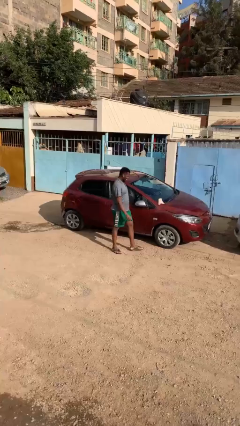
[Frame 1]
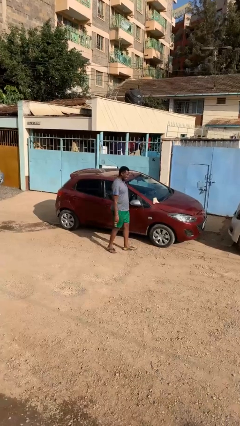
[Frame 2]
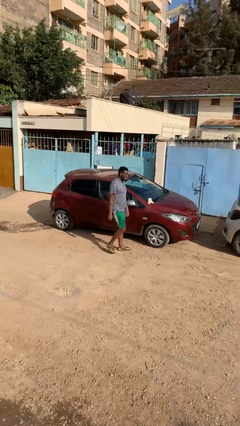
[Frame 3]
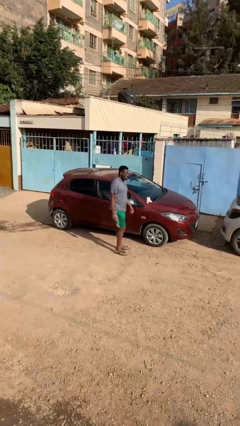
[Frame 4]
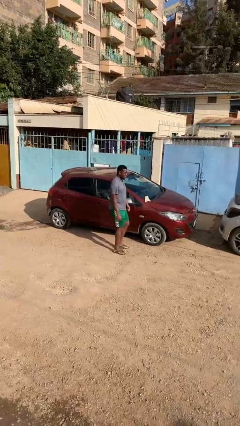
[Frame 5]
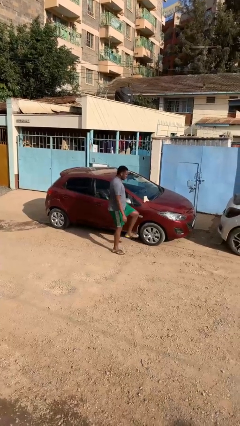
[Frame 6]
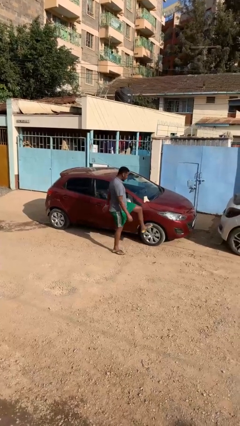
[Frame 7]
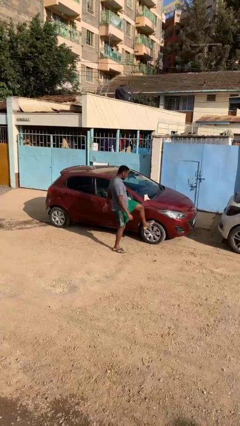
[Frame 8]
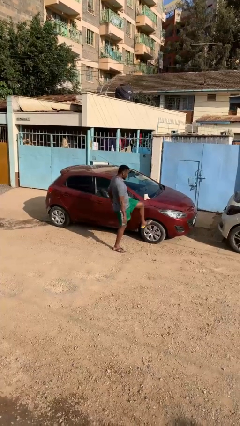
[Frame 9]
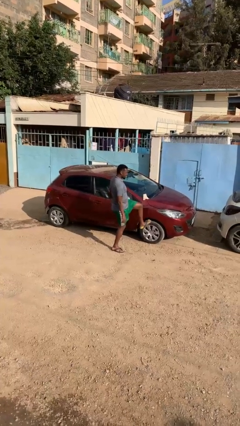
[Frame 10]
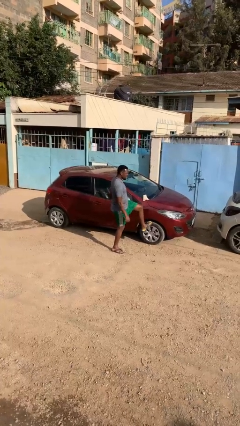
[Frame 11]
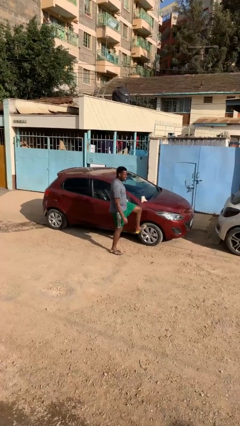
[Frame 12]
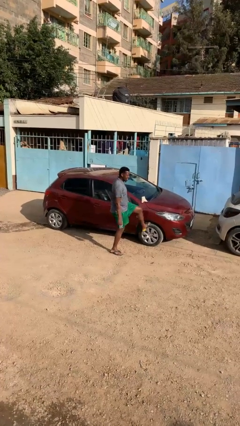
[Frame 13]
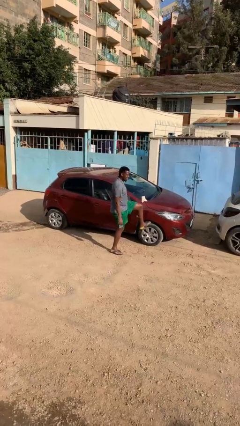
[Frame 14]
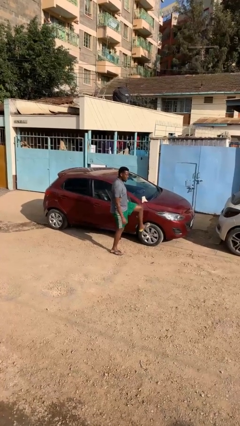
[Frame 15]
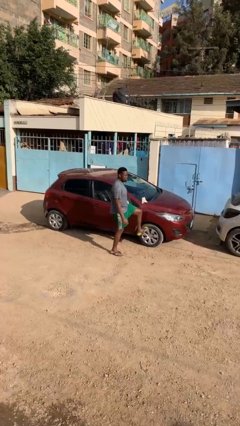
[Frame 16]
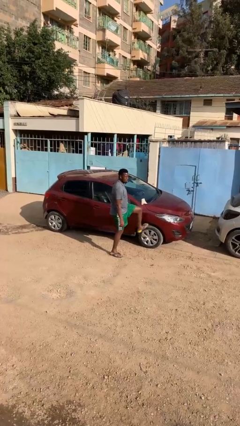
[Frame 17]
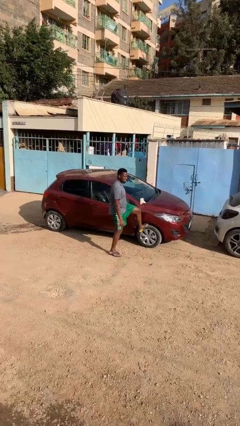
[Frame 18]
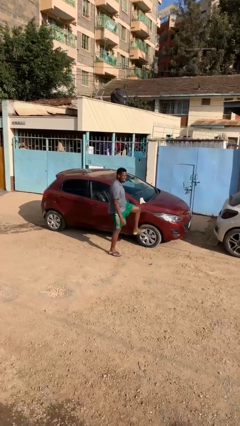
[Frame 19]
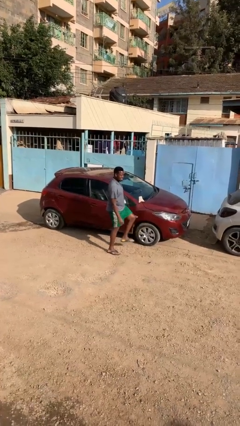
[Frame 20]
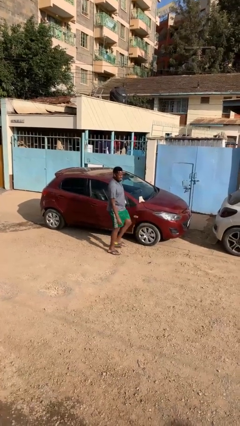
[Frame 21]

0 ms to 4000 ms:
person kicks car tires

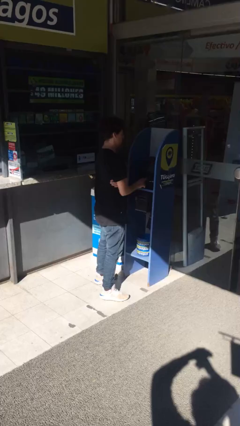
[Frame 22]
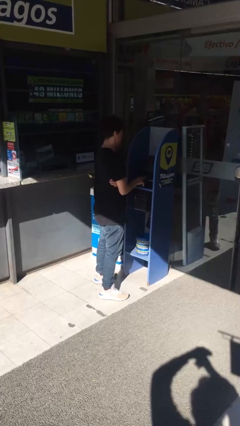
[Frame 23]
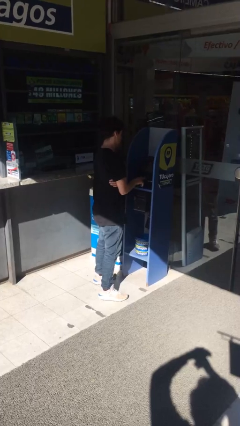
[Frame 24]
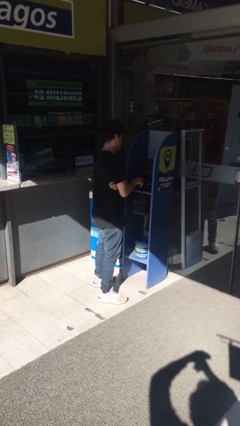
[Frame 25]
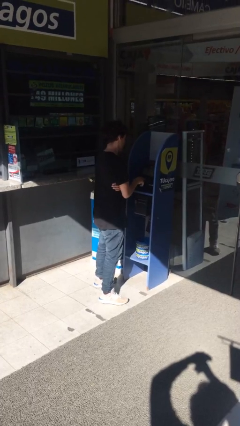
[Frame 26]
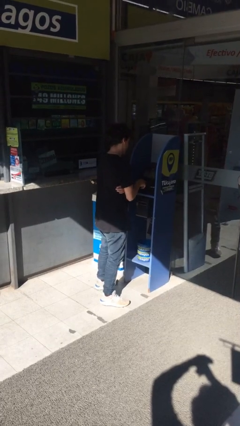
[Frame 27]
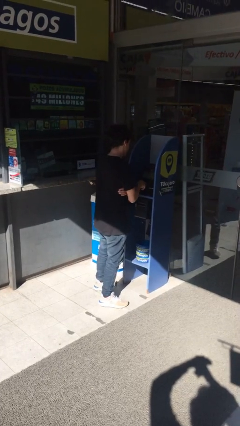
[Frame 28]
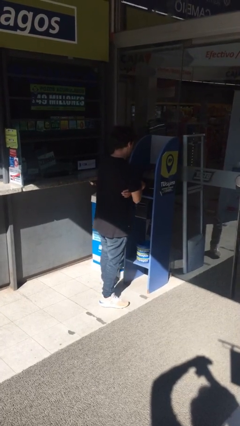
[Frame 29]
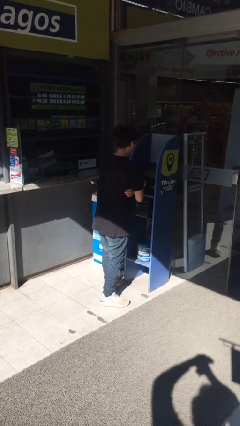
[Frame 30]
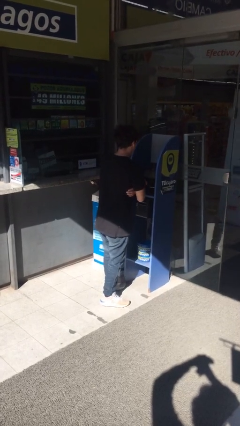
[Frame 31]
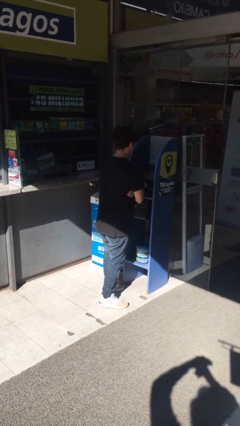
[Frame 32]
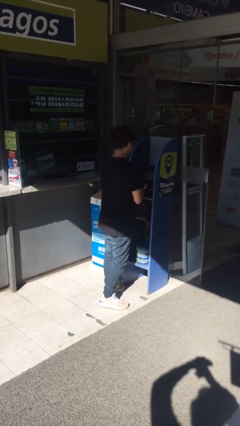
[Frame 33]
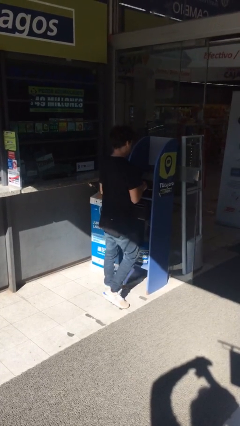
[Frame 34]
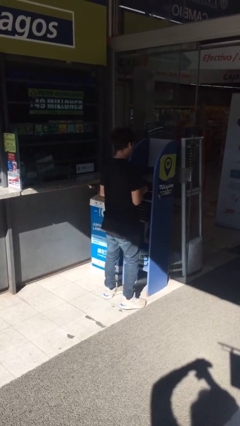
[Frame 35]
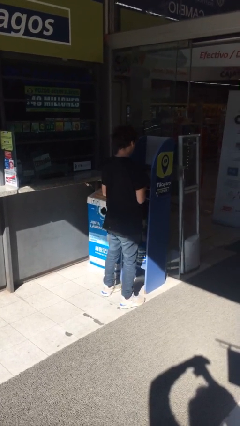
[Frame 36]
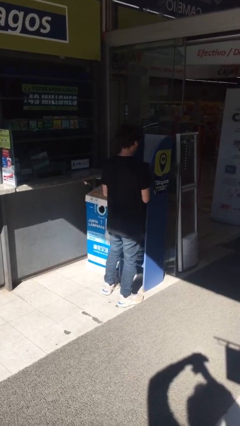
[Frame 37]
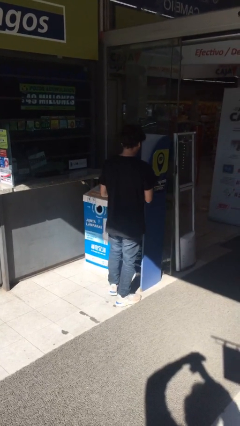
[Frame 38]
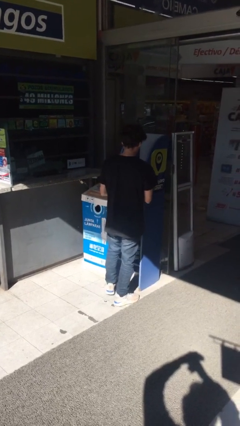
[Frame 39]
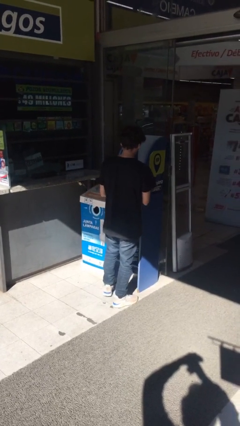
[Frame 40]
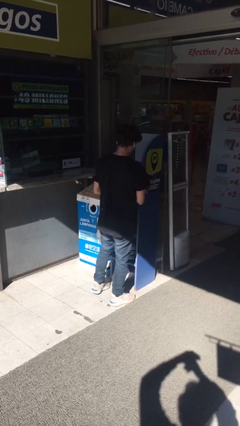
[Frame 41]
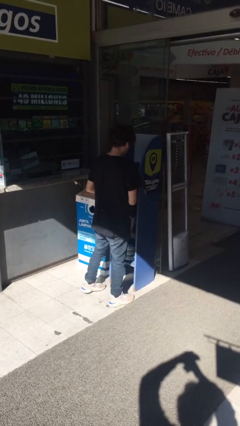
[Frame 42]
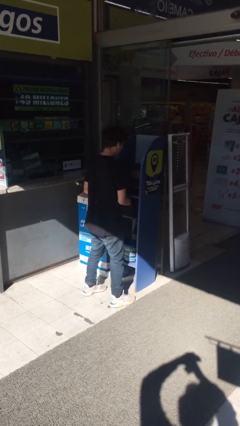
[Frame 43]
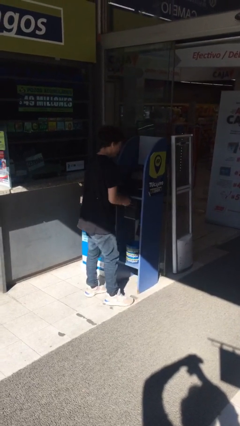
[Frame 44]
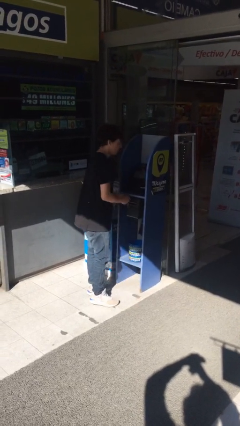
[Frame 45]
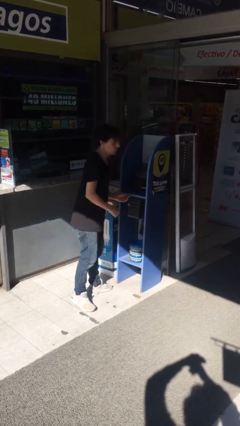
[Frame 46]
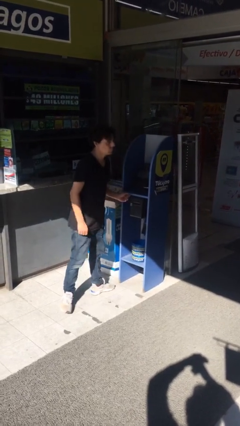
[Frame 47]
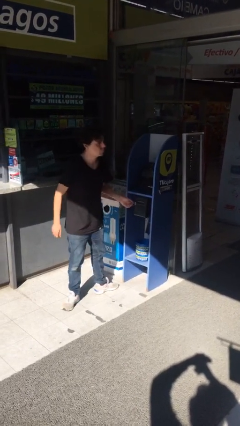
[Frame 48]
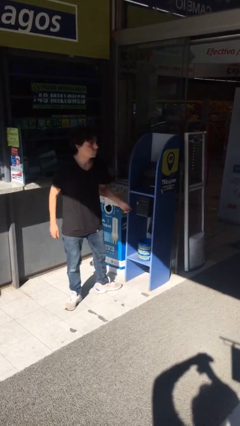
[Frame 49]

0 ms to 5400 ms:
person purchases from machine

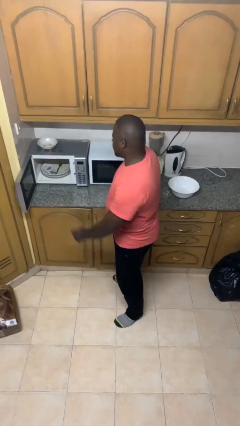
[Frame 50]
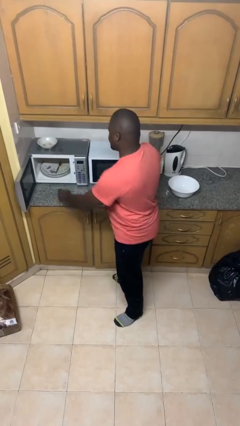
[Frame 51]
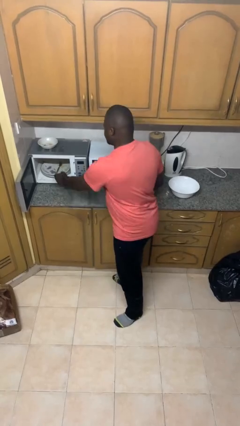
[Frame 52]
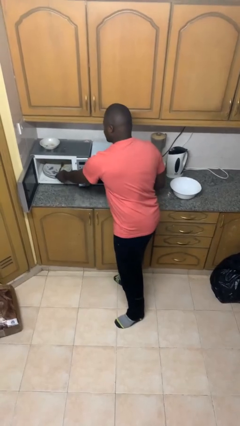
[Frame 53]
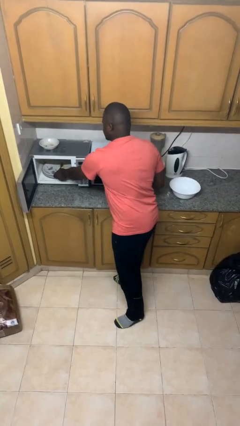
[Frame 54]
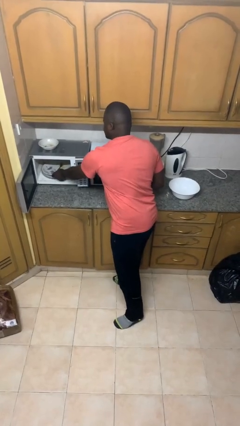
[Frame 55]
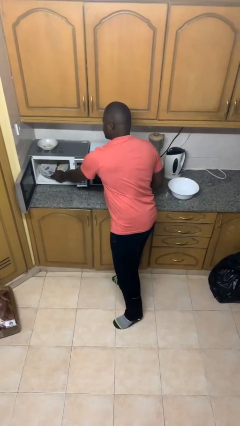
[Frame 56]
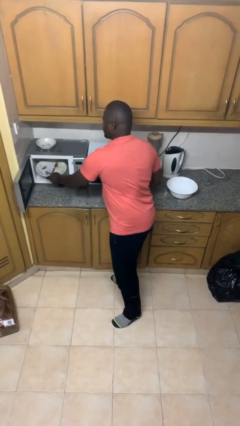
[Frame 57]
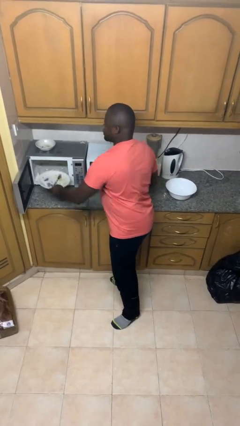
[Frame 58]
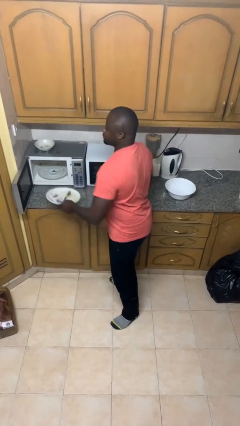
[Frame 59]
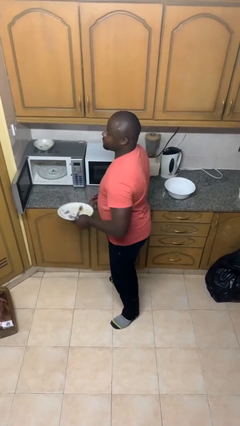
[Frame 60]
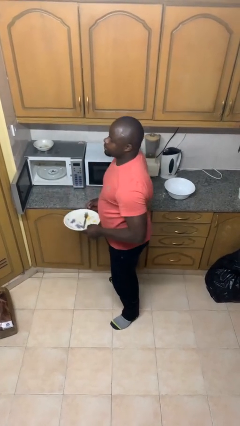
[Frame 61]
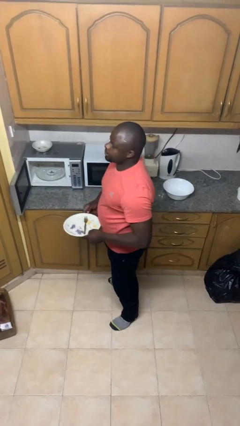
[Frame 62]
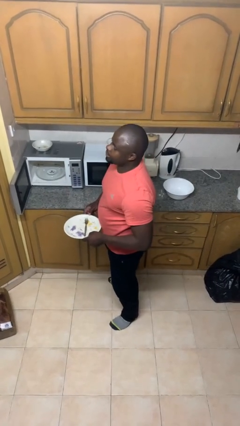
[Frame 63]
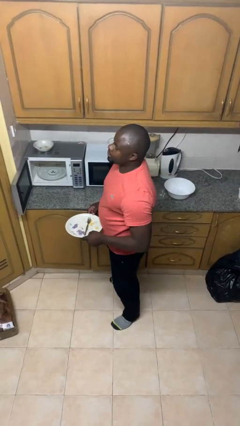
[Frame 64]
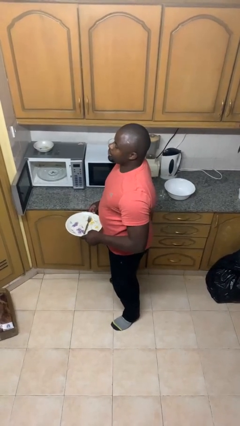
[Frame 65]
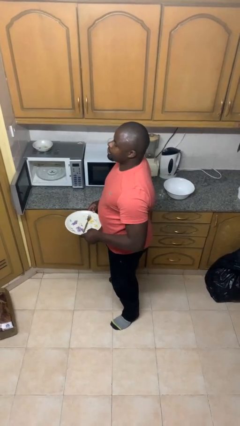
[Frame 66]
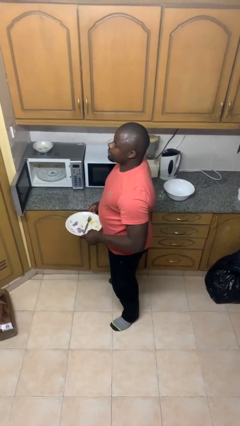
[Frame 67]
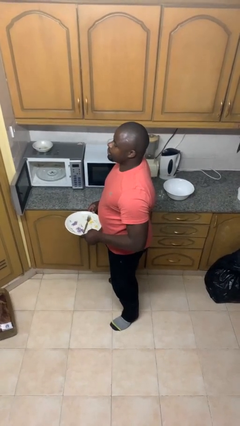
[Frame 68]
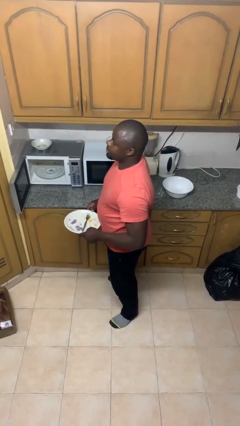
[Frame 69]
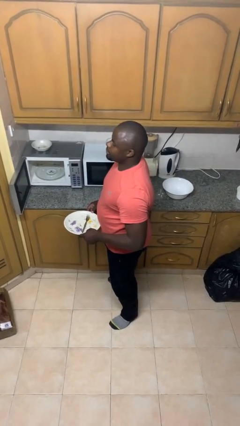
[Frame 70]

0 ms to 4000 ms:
person takes object from microwave

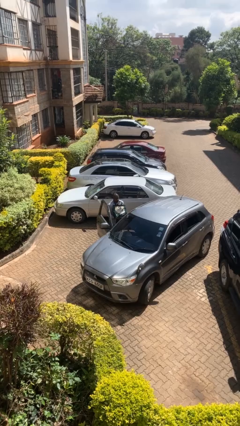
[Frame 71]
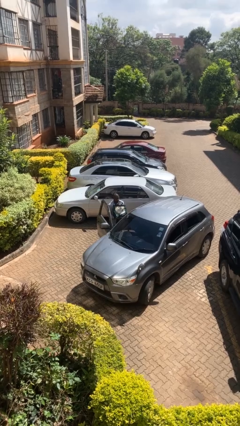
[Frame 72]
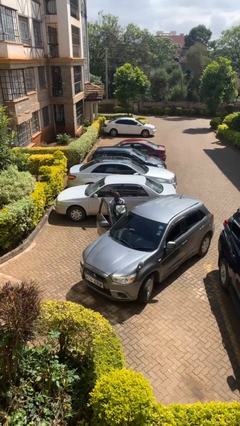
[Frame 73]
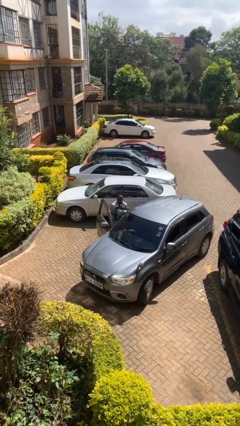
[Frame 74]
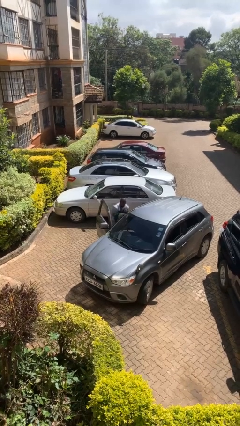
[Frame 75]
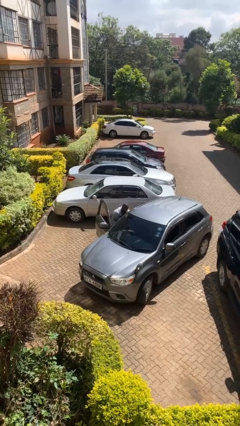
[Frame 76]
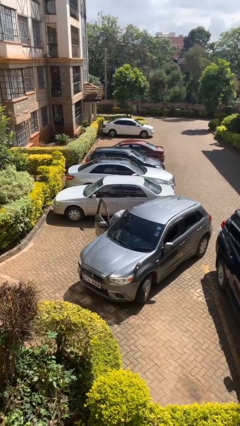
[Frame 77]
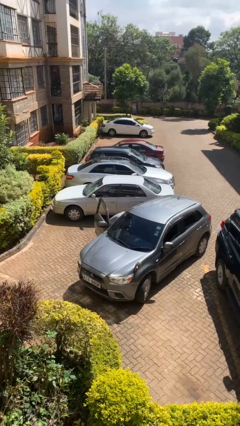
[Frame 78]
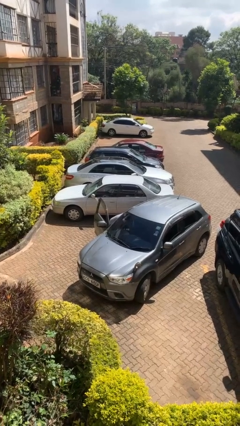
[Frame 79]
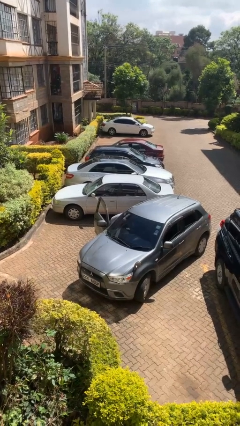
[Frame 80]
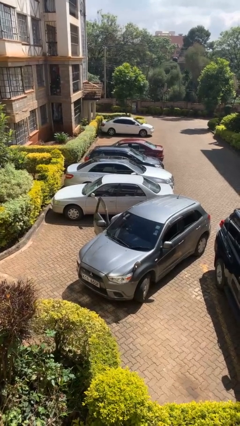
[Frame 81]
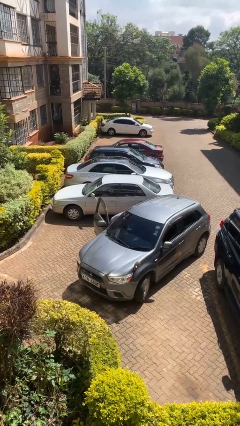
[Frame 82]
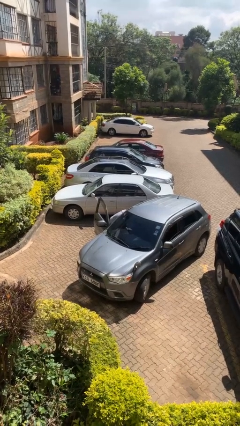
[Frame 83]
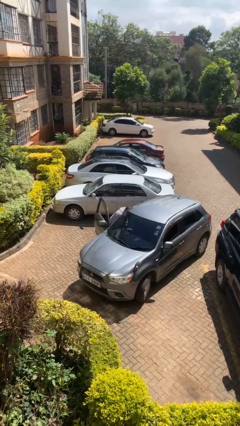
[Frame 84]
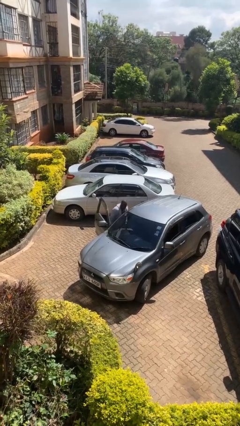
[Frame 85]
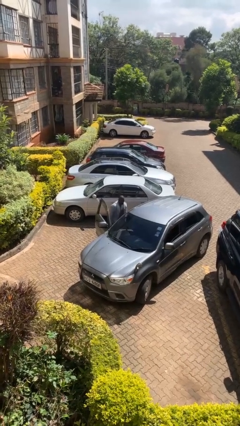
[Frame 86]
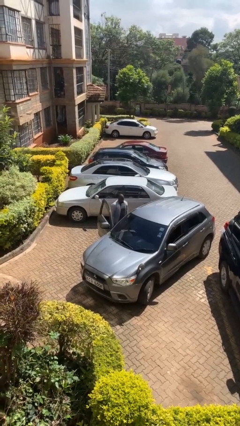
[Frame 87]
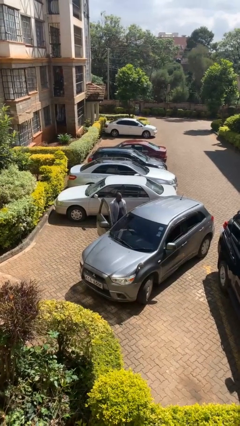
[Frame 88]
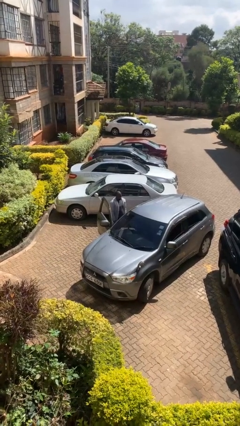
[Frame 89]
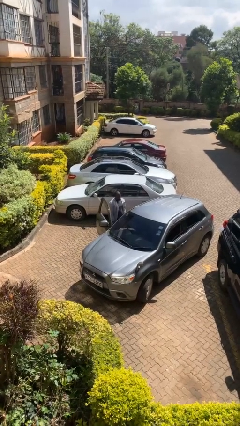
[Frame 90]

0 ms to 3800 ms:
person loads car

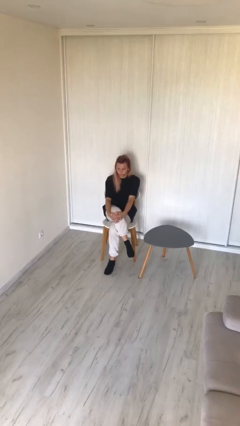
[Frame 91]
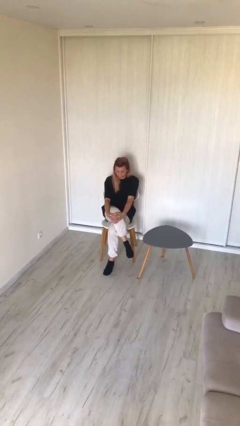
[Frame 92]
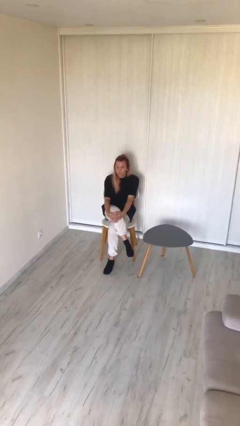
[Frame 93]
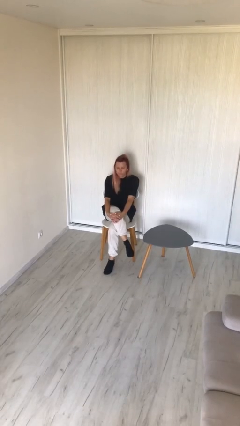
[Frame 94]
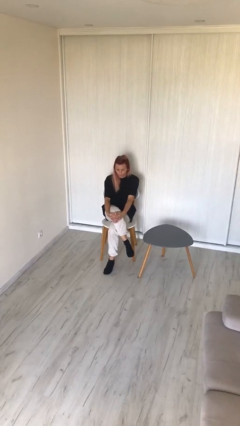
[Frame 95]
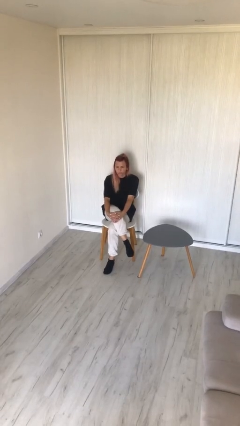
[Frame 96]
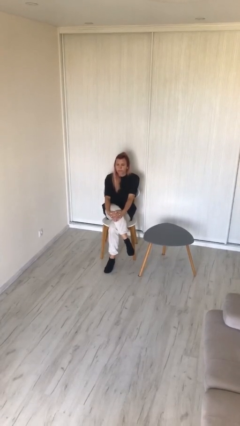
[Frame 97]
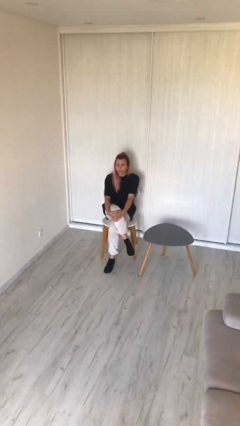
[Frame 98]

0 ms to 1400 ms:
person nods head
